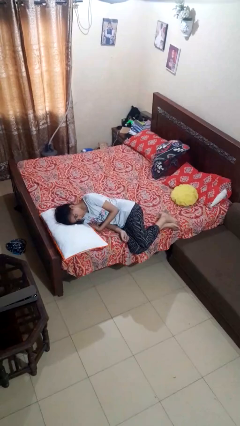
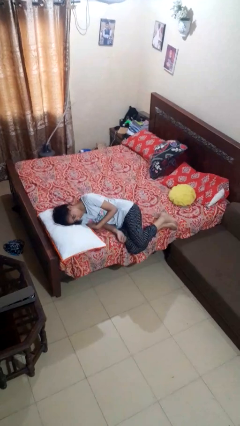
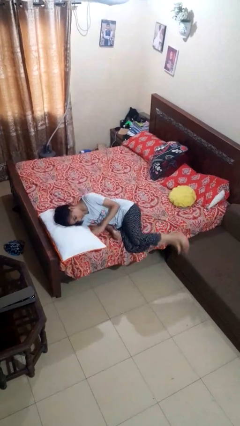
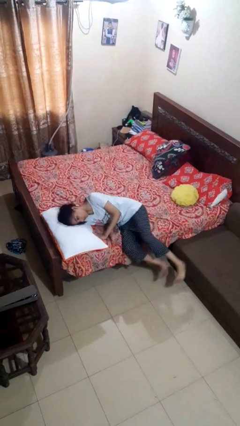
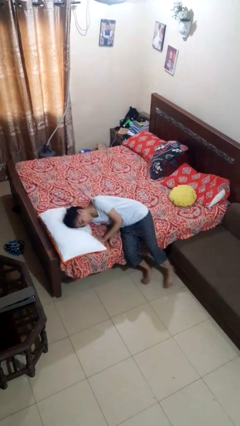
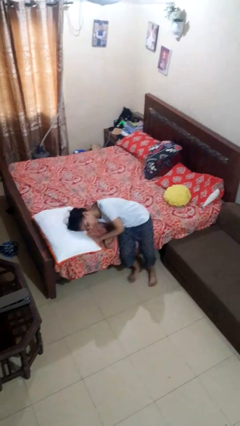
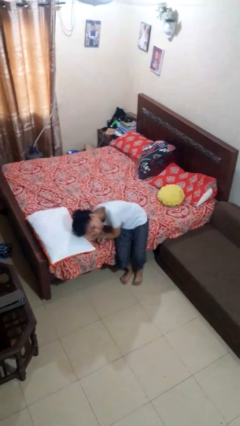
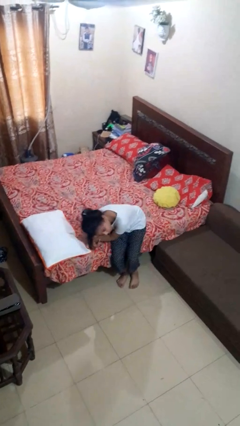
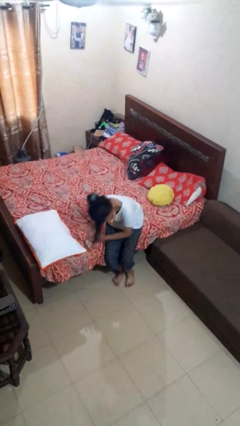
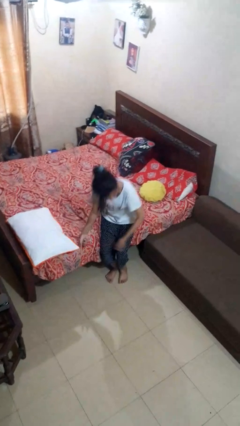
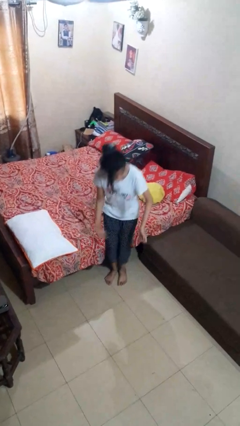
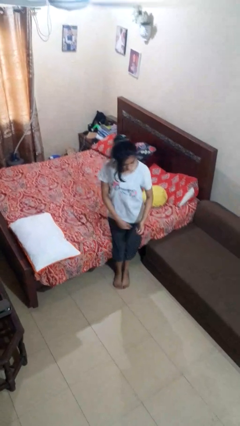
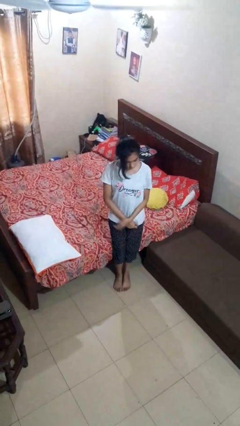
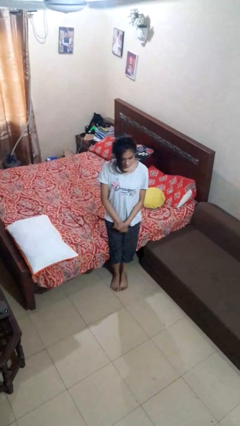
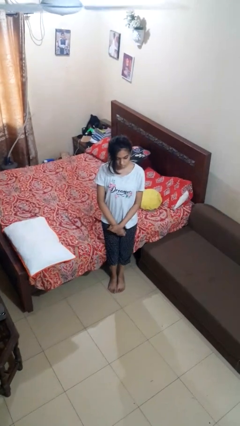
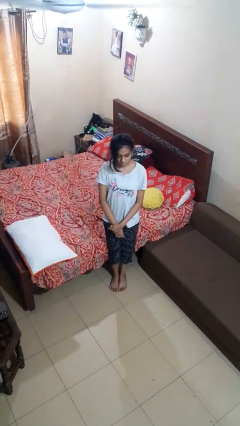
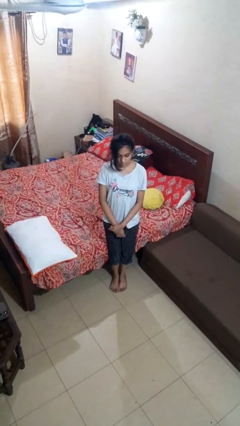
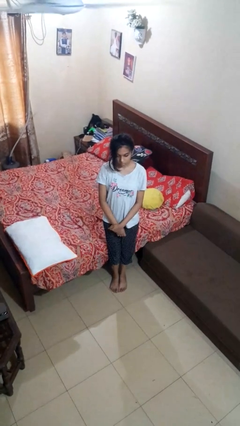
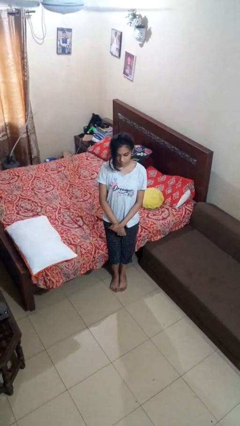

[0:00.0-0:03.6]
person stands up

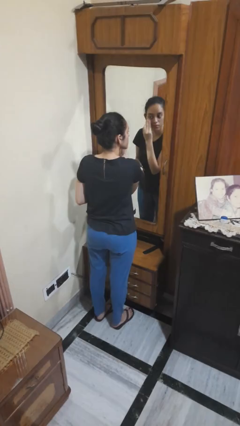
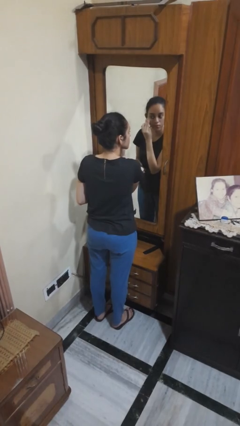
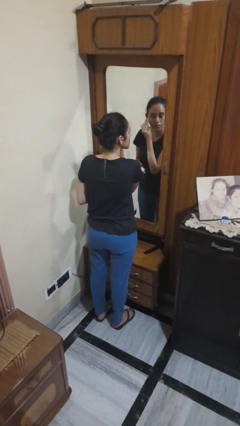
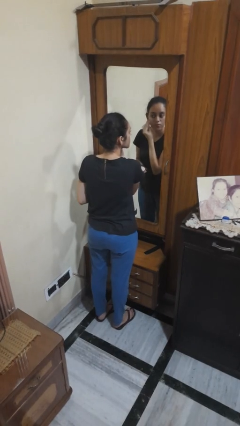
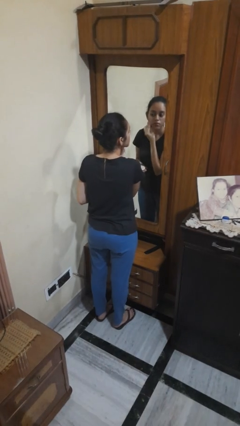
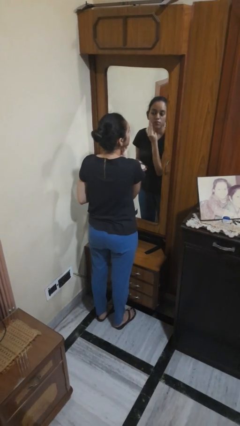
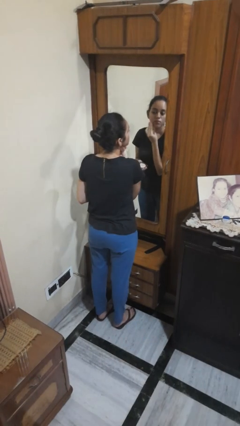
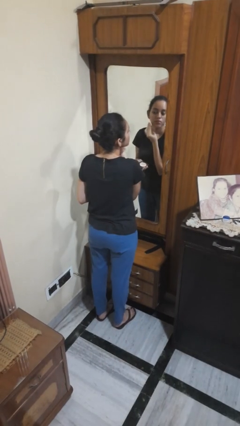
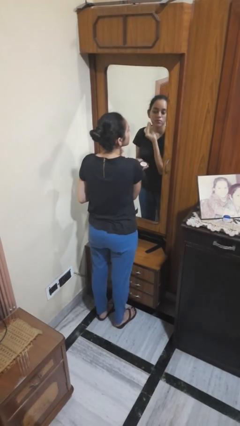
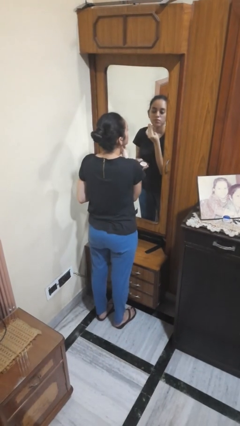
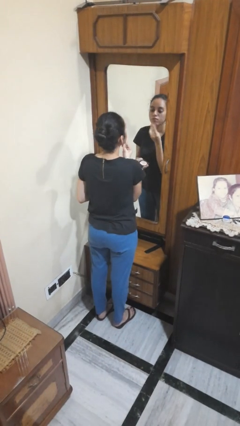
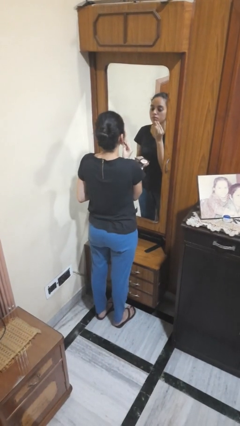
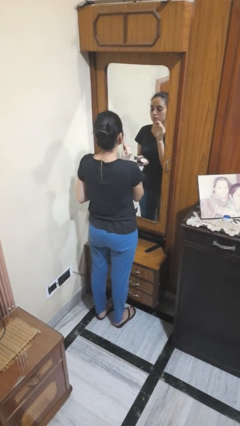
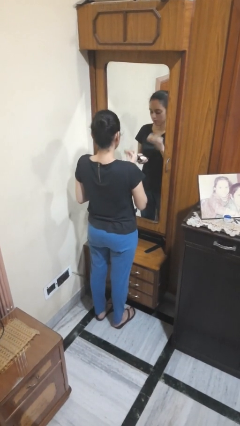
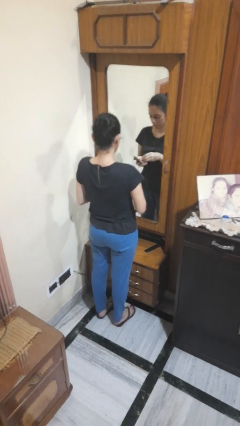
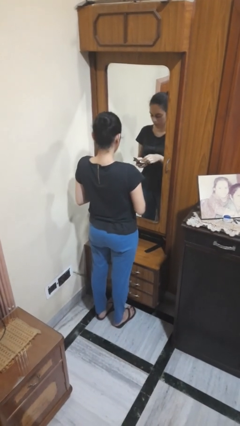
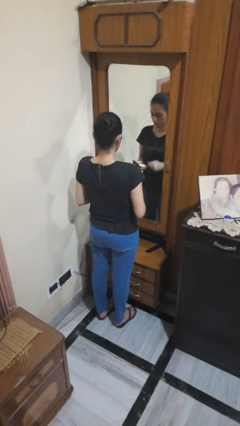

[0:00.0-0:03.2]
person applies foundation makeup

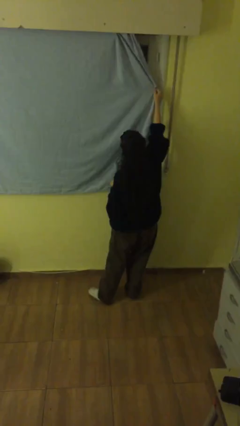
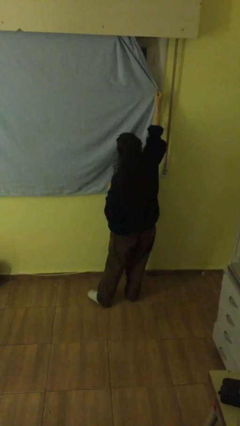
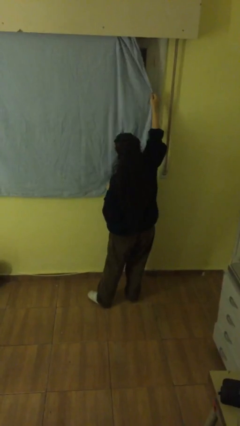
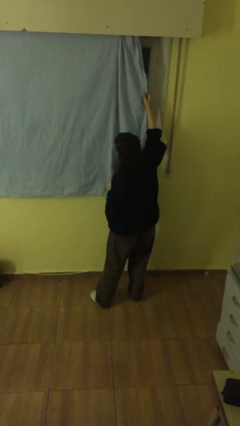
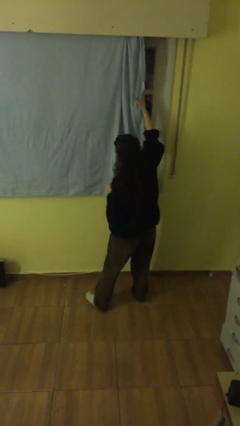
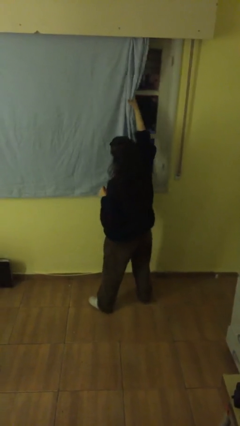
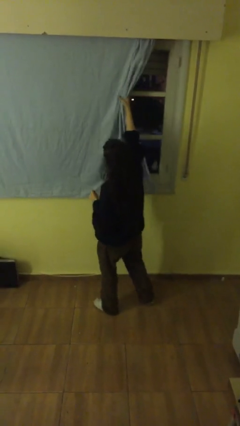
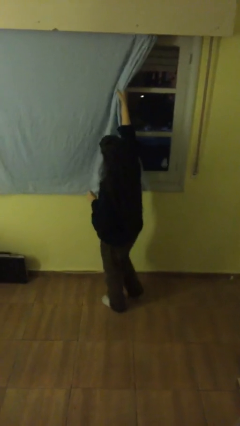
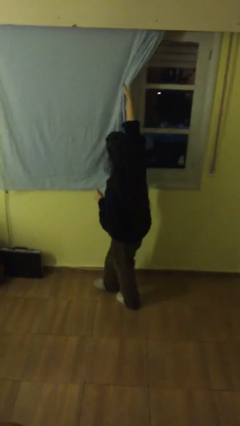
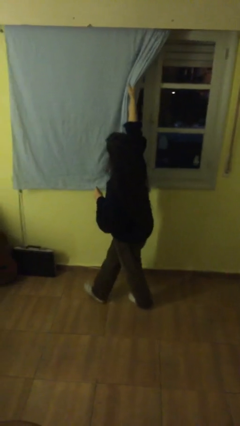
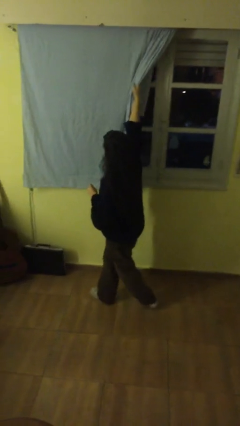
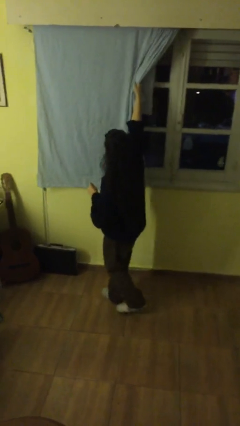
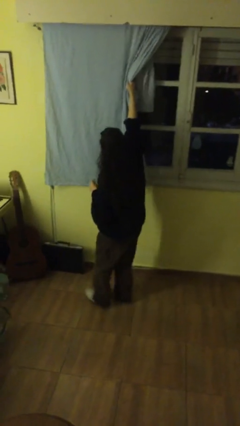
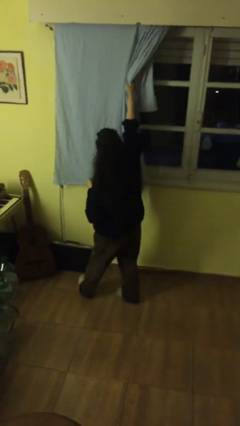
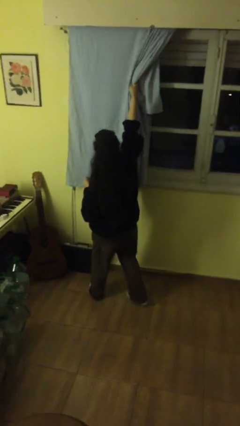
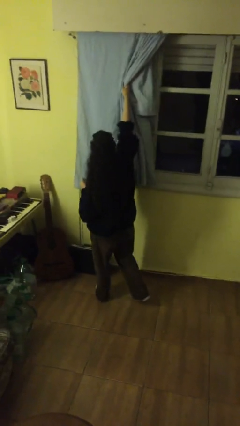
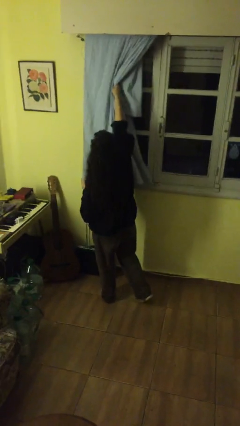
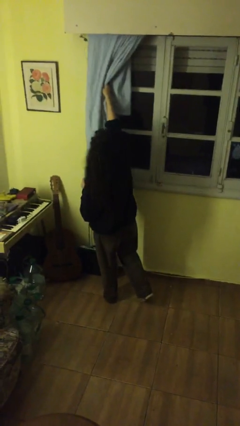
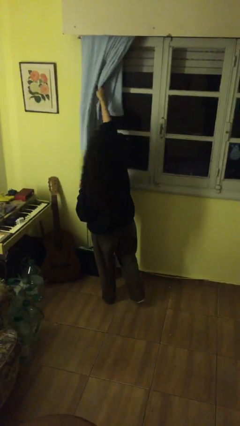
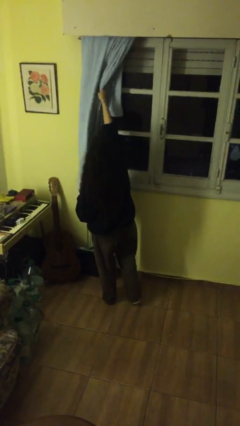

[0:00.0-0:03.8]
person opens curtains

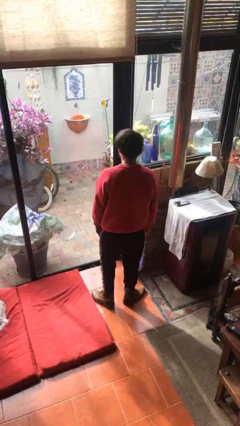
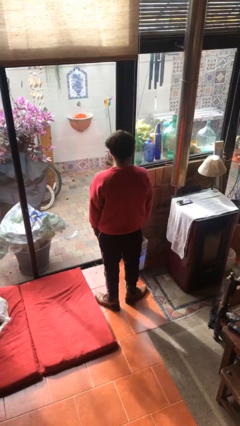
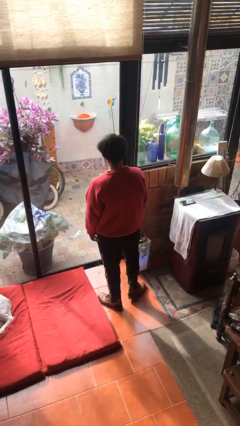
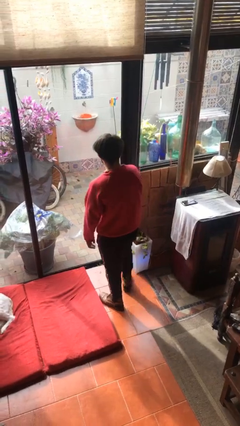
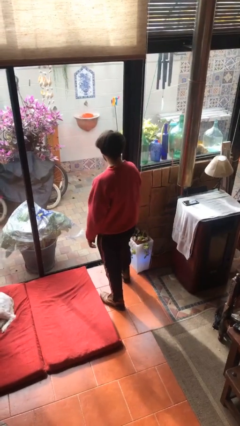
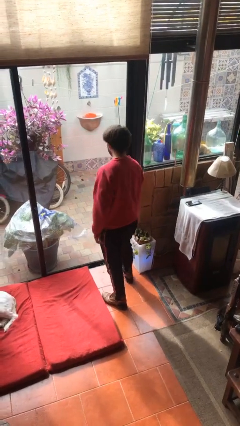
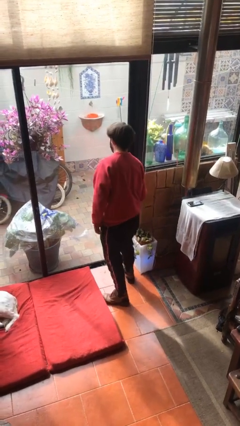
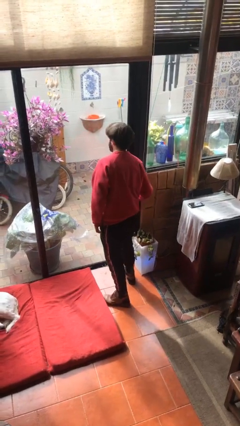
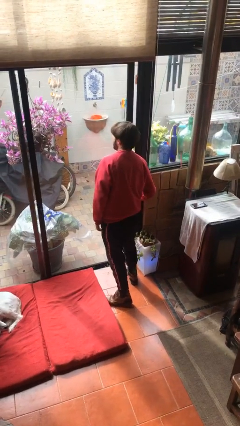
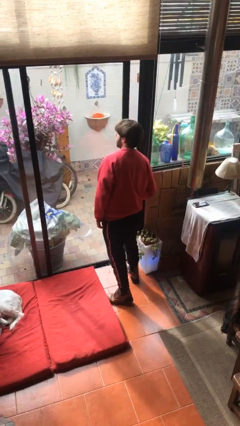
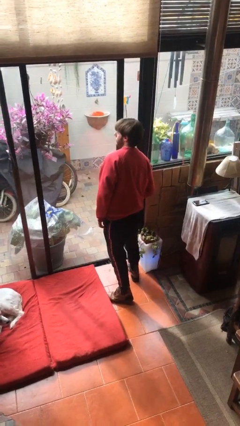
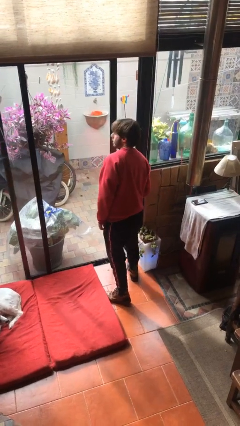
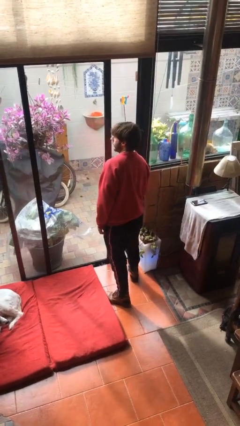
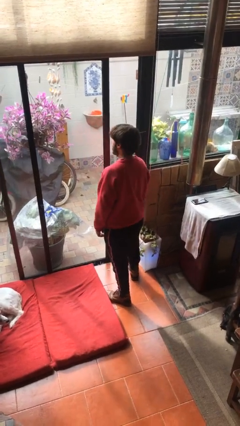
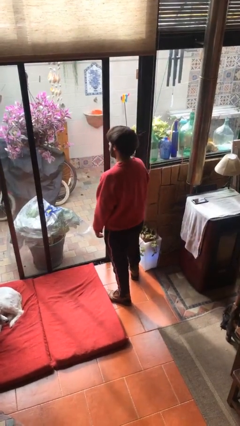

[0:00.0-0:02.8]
person opens sliding door

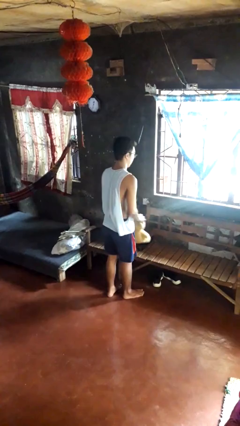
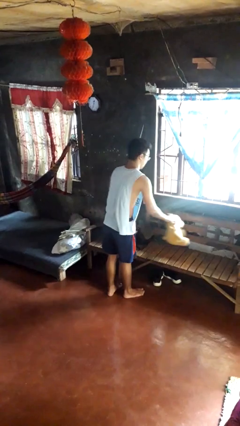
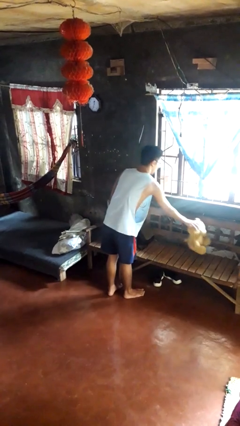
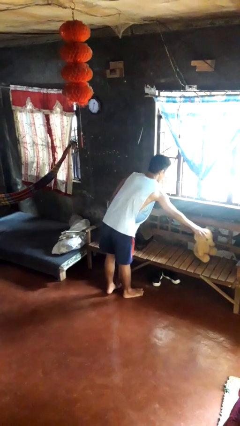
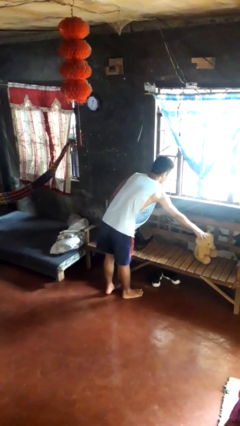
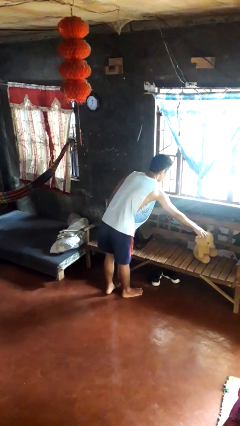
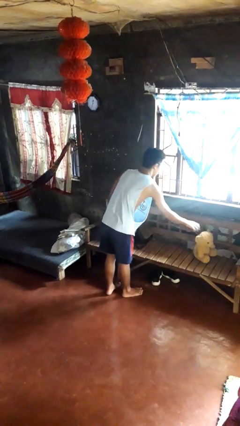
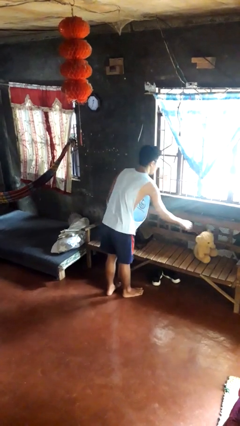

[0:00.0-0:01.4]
person puts down object on couch

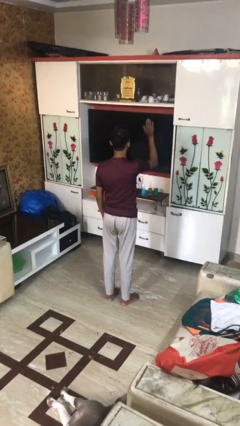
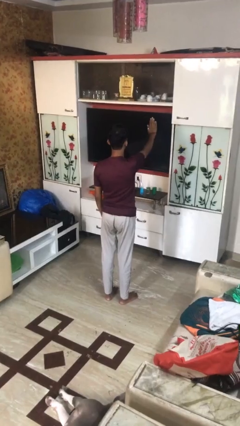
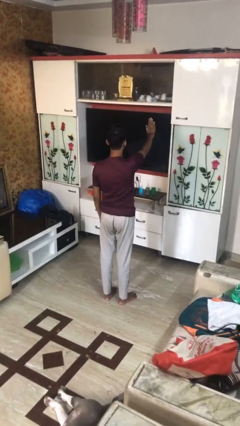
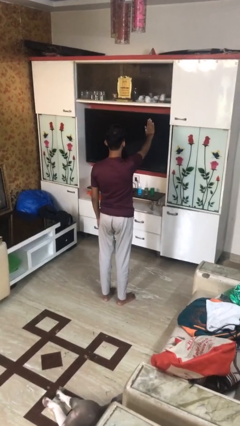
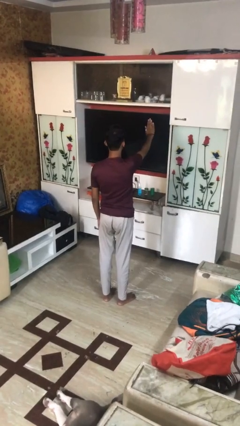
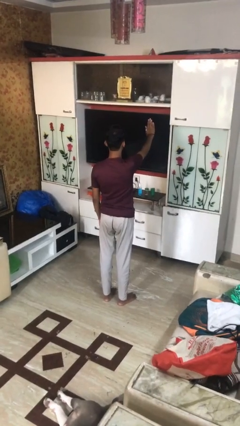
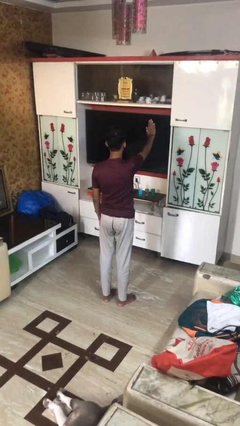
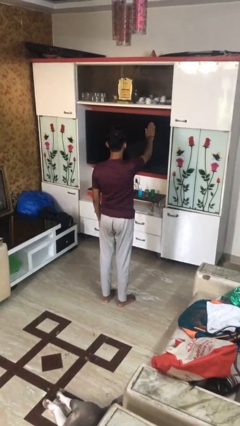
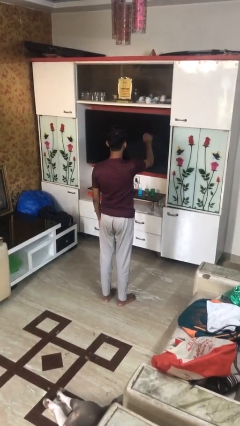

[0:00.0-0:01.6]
person gestures stop

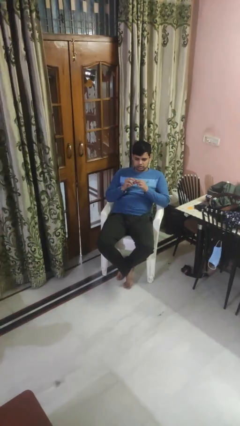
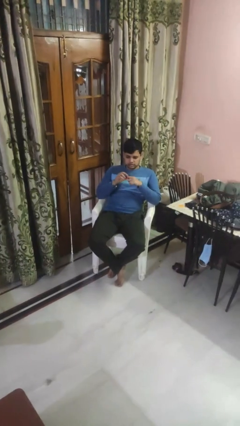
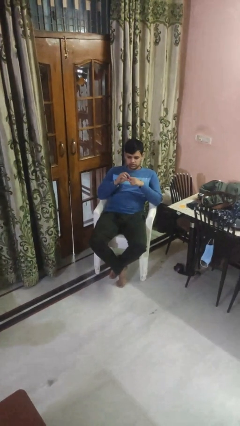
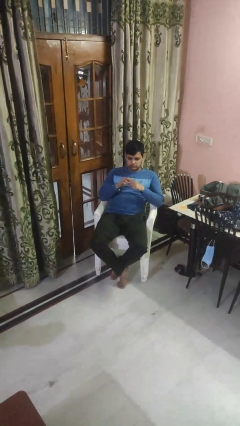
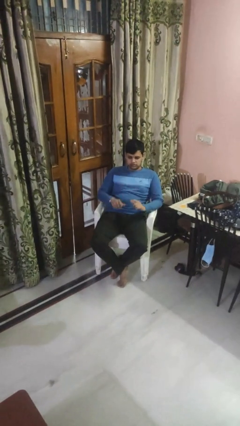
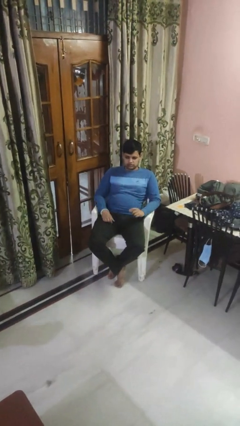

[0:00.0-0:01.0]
person puts on ring
